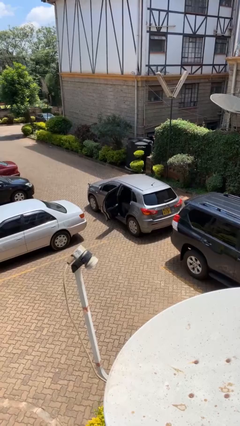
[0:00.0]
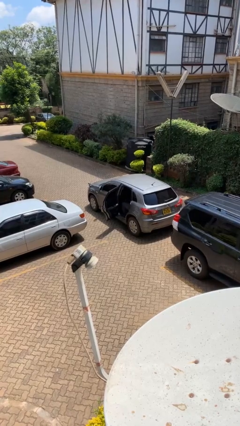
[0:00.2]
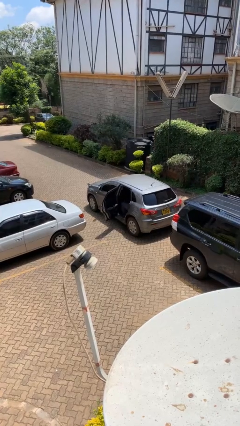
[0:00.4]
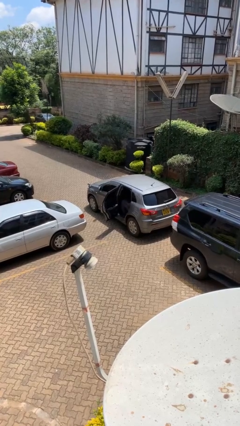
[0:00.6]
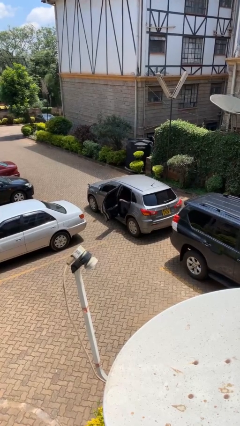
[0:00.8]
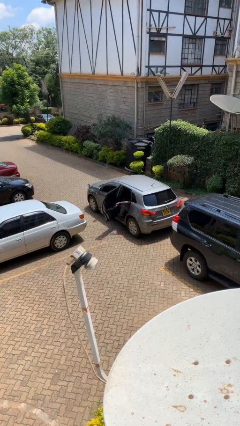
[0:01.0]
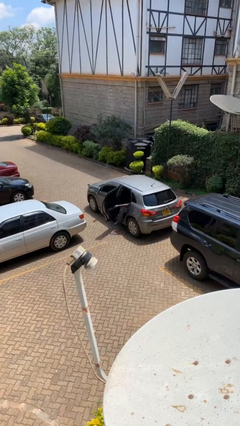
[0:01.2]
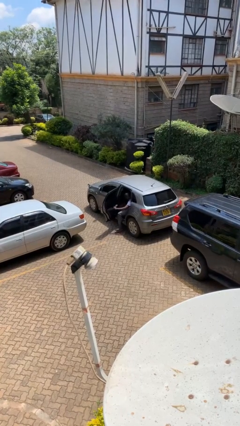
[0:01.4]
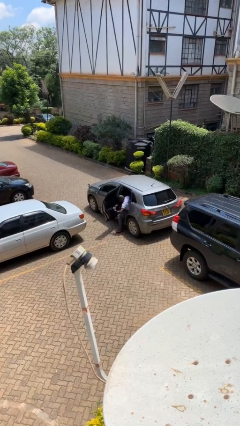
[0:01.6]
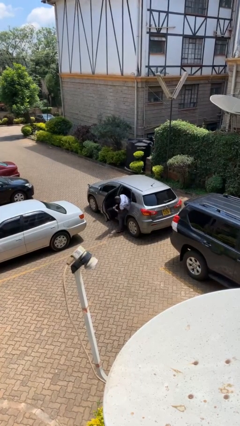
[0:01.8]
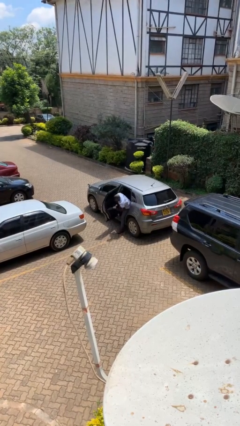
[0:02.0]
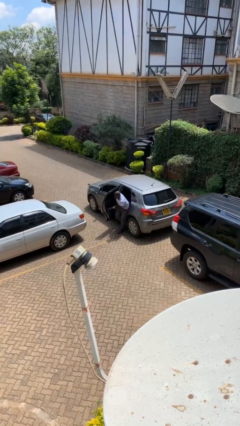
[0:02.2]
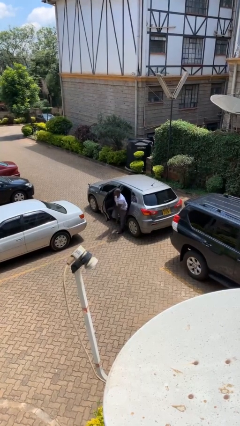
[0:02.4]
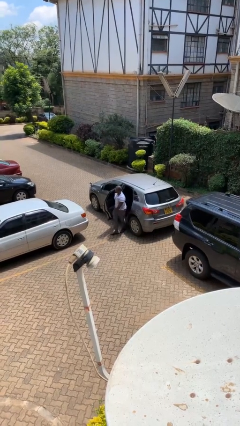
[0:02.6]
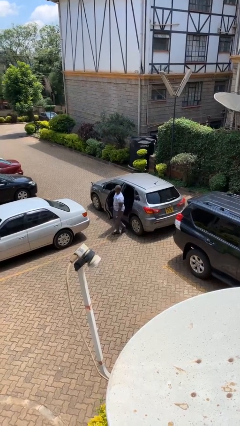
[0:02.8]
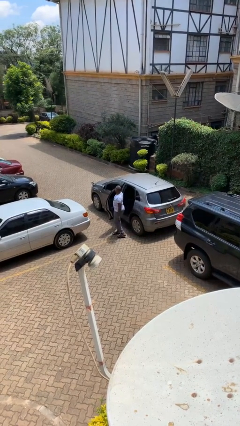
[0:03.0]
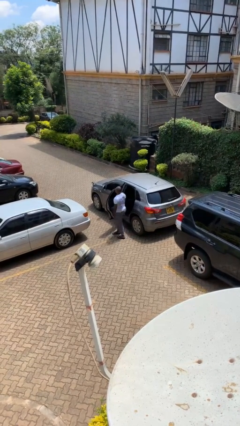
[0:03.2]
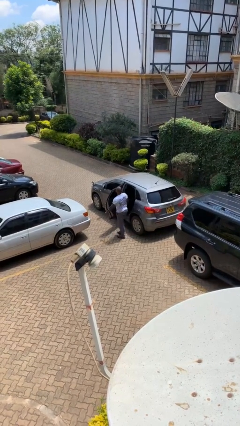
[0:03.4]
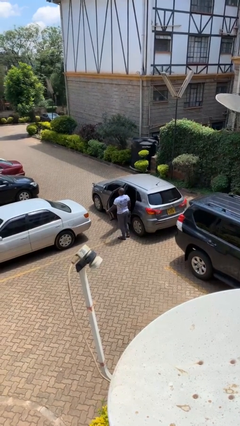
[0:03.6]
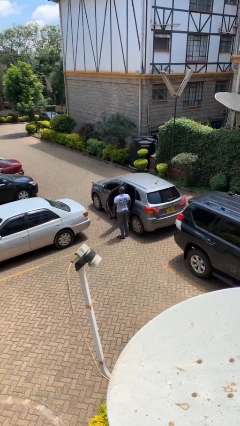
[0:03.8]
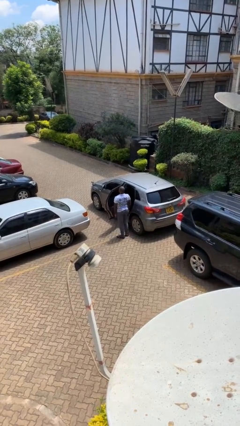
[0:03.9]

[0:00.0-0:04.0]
person exits car

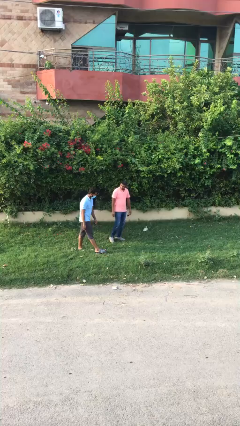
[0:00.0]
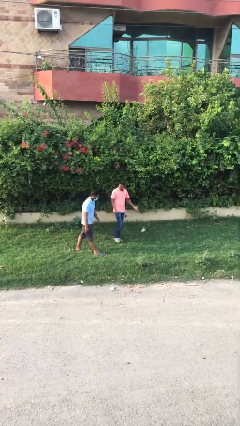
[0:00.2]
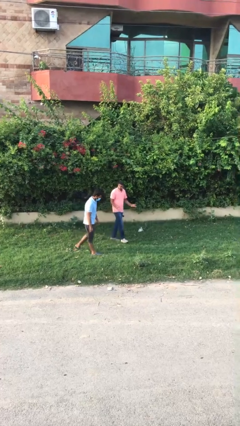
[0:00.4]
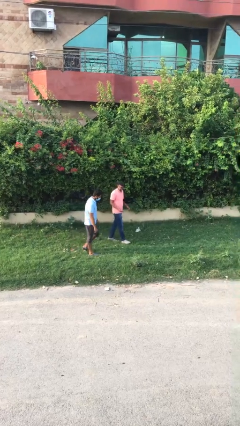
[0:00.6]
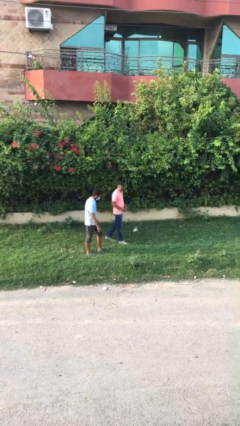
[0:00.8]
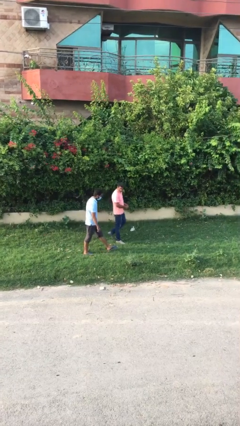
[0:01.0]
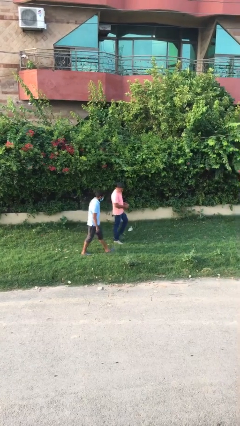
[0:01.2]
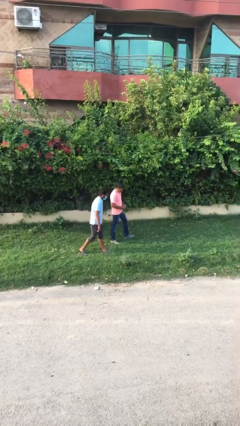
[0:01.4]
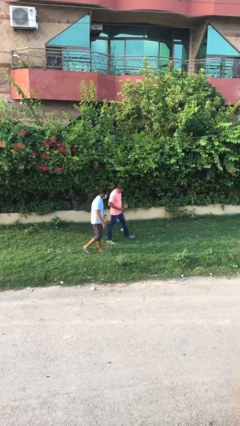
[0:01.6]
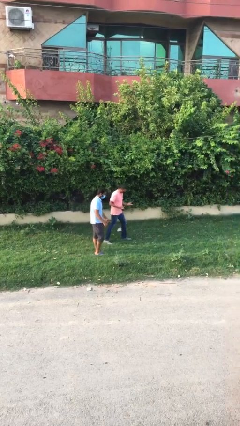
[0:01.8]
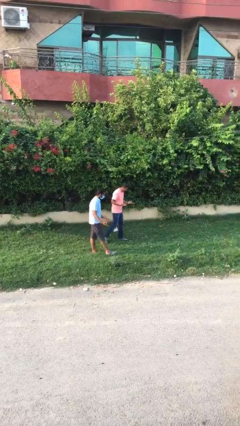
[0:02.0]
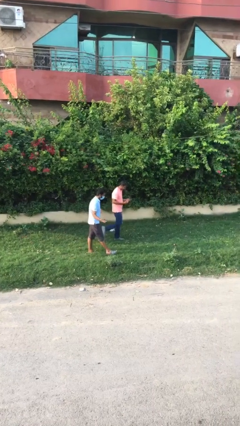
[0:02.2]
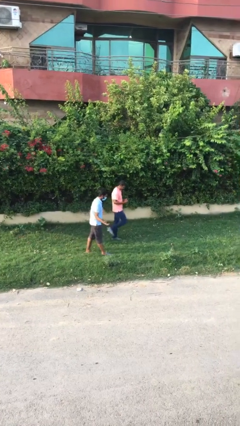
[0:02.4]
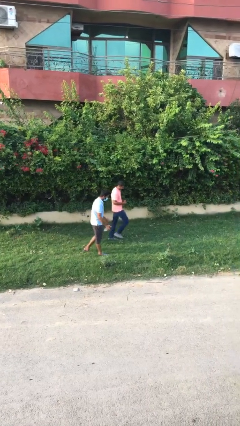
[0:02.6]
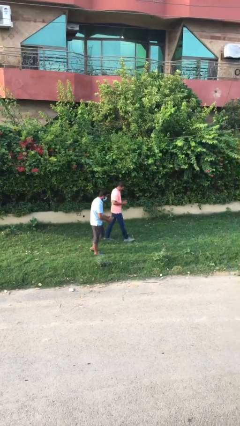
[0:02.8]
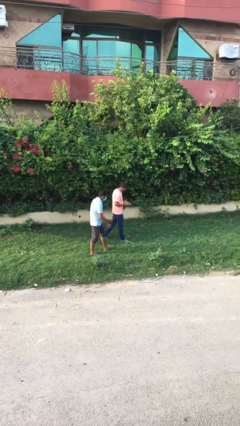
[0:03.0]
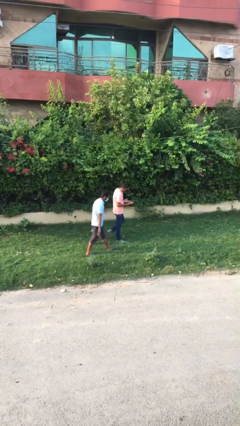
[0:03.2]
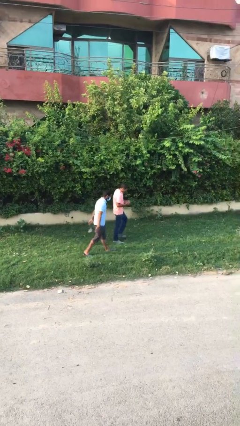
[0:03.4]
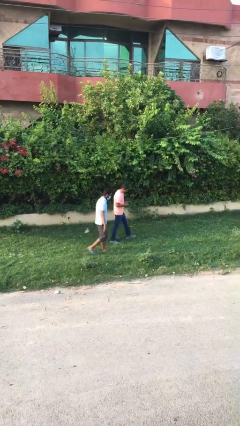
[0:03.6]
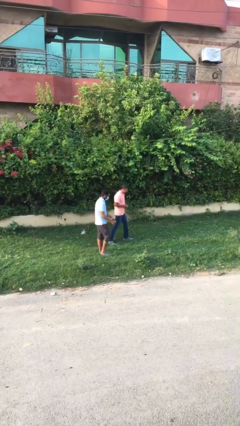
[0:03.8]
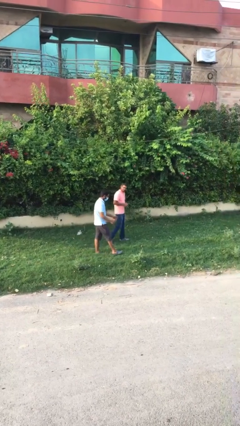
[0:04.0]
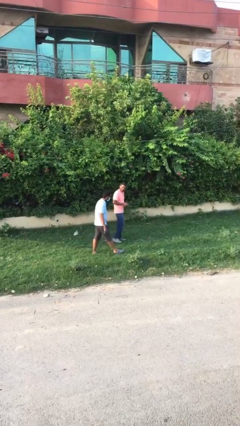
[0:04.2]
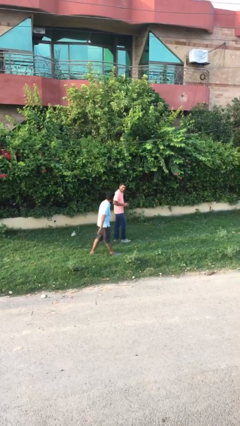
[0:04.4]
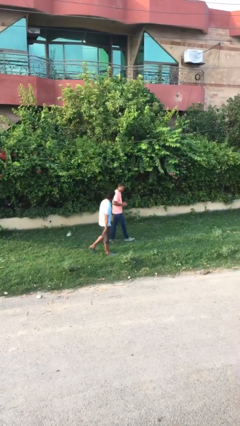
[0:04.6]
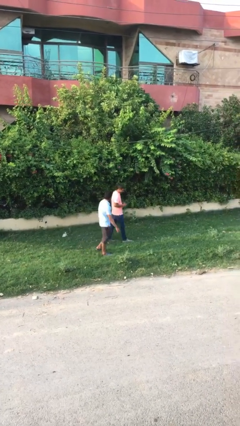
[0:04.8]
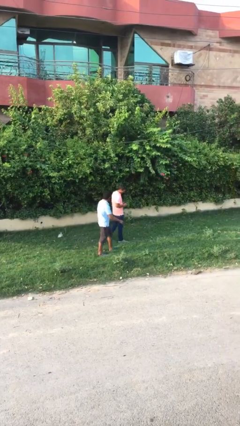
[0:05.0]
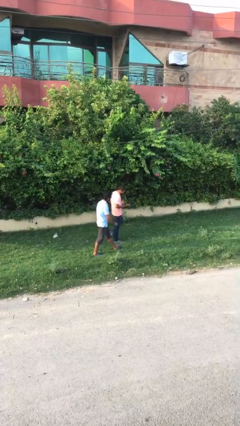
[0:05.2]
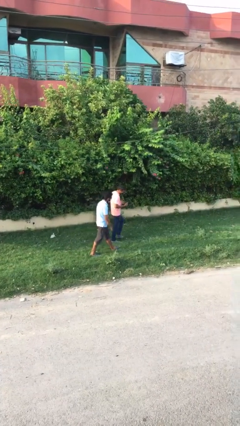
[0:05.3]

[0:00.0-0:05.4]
person talks to person

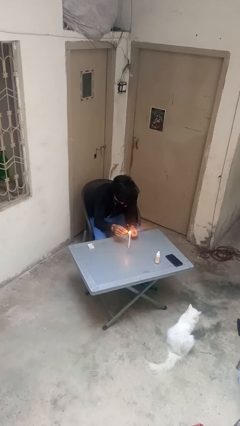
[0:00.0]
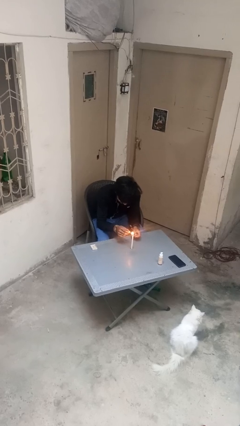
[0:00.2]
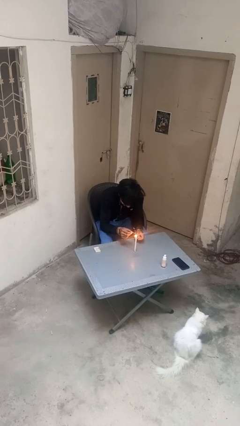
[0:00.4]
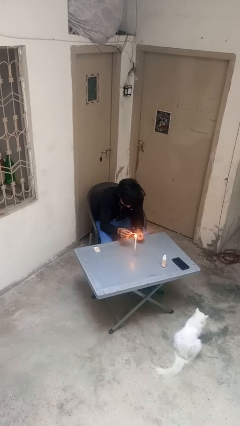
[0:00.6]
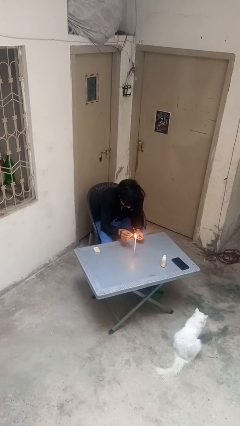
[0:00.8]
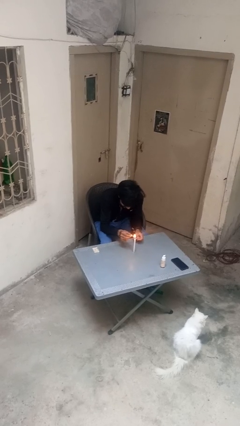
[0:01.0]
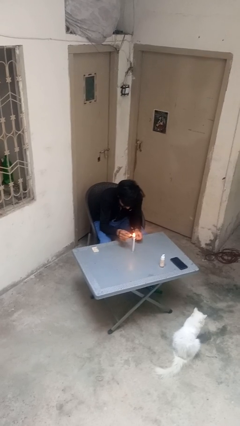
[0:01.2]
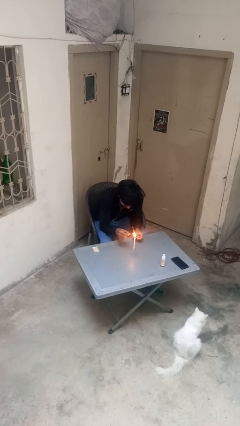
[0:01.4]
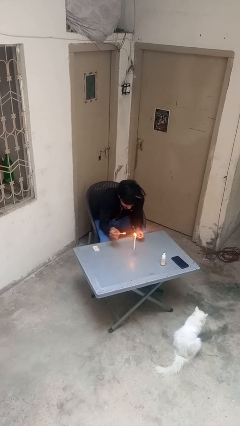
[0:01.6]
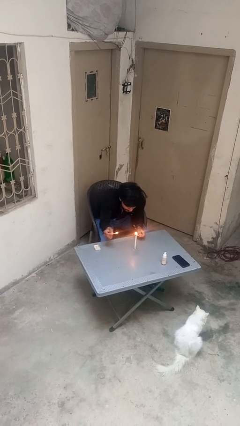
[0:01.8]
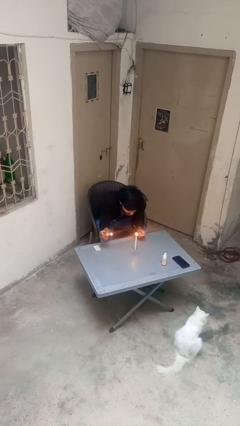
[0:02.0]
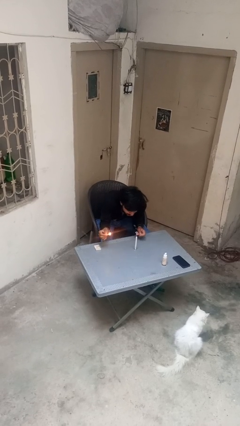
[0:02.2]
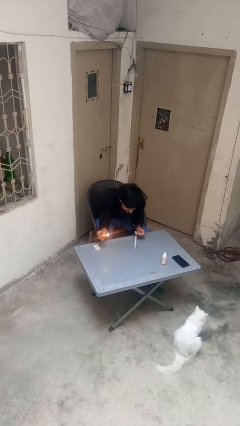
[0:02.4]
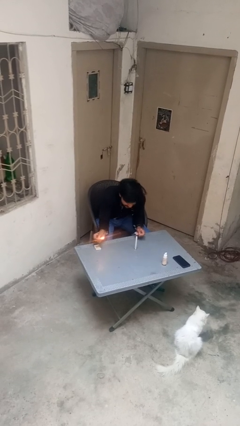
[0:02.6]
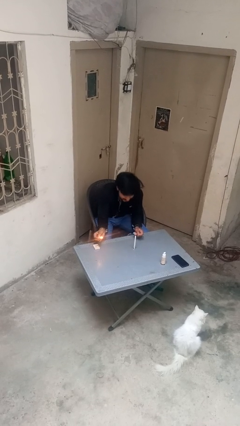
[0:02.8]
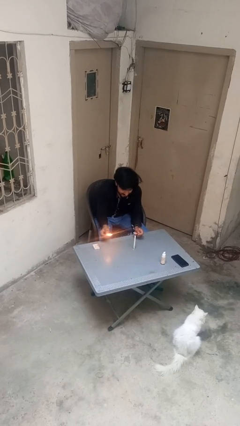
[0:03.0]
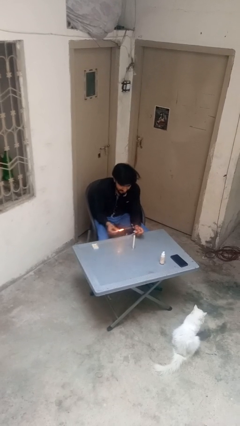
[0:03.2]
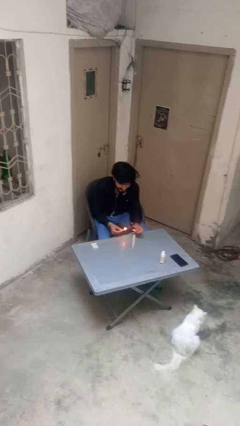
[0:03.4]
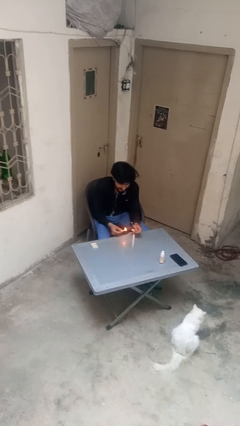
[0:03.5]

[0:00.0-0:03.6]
person extinguishes candle

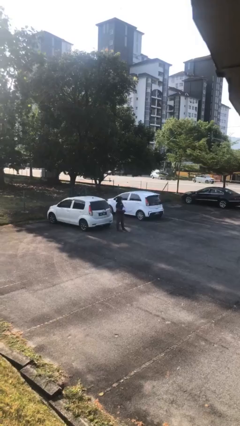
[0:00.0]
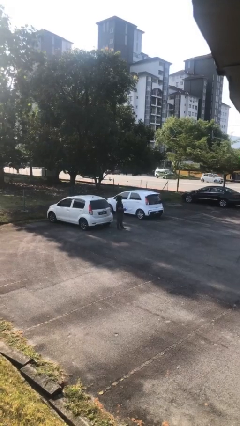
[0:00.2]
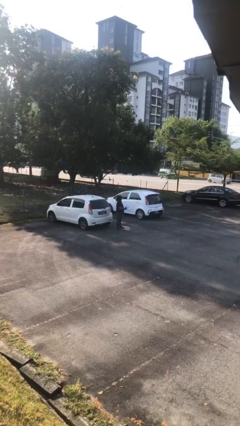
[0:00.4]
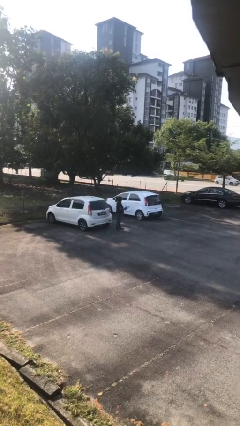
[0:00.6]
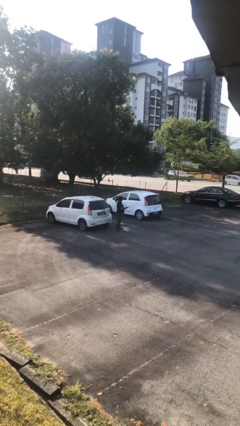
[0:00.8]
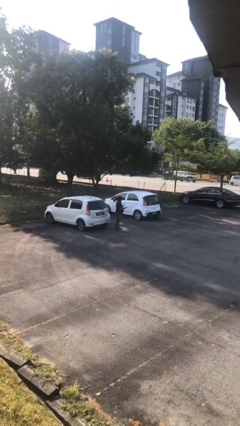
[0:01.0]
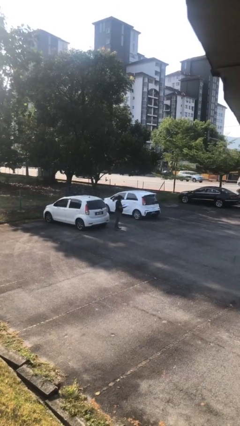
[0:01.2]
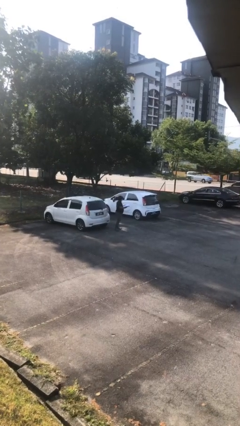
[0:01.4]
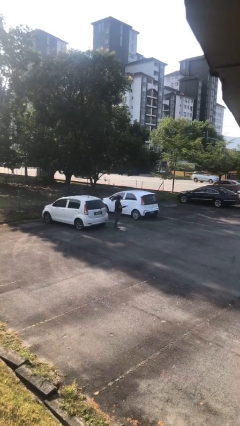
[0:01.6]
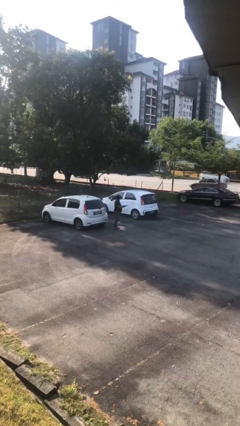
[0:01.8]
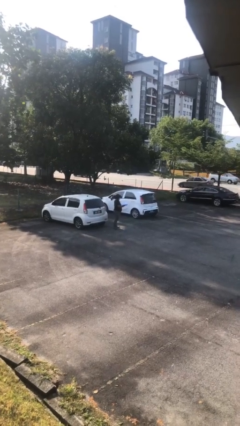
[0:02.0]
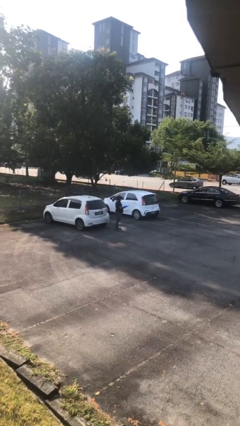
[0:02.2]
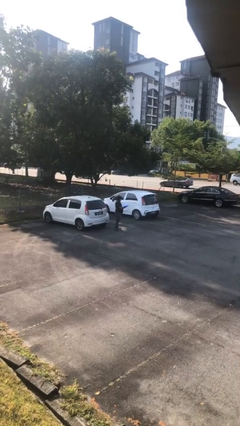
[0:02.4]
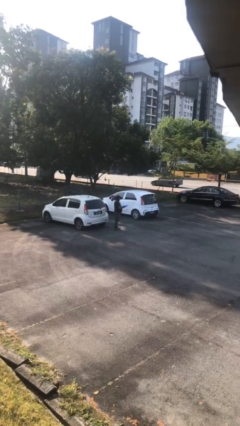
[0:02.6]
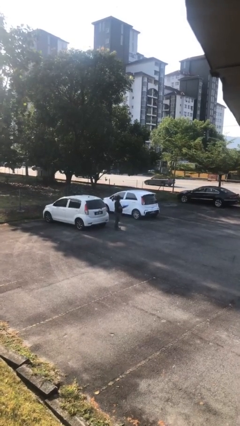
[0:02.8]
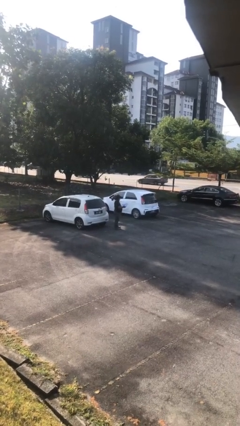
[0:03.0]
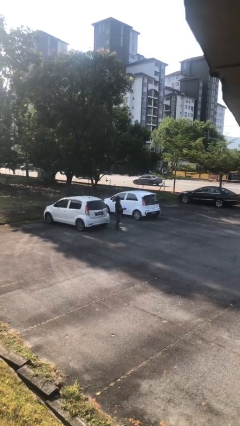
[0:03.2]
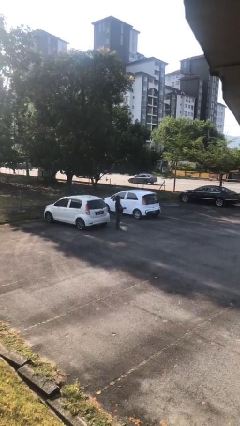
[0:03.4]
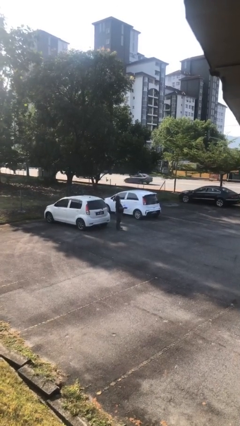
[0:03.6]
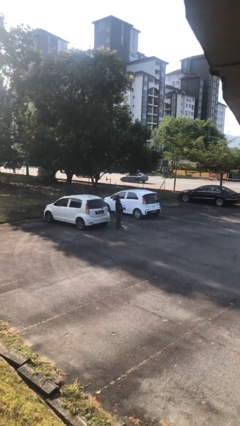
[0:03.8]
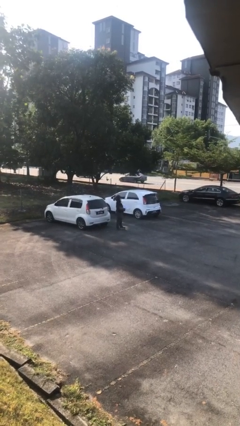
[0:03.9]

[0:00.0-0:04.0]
person reads document

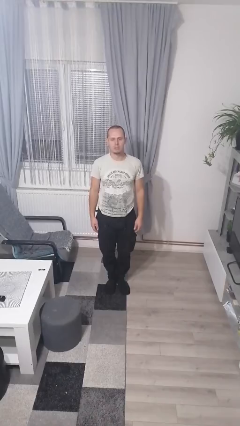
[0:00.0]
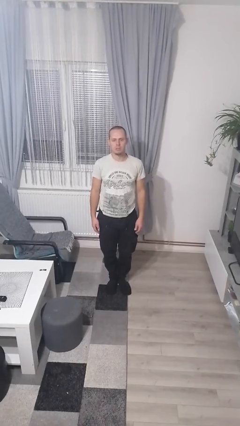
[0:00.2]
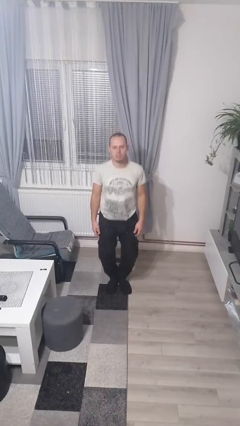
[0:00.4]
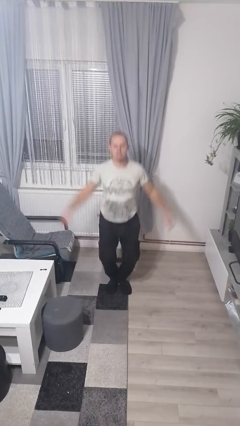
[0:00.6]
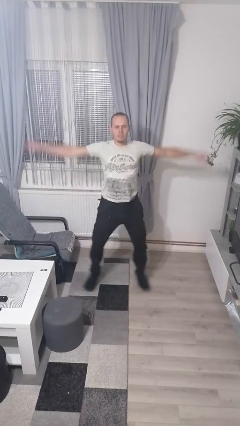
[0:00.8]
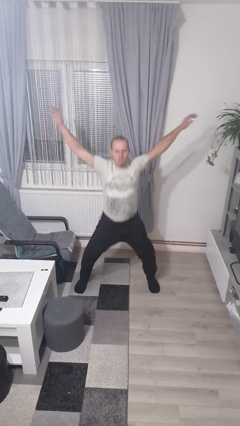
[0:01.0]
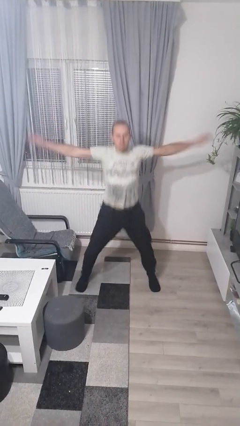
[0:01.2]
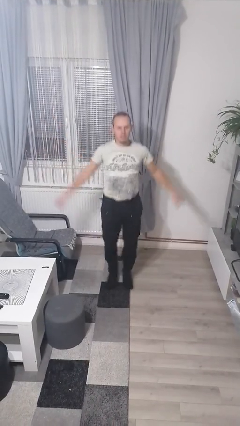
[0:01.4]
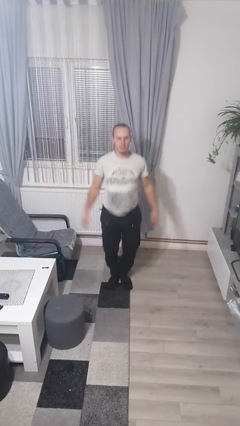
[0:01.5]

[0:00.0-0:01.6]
person exercises with jumping jacks
